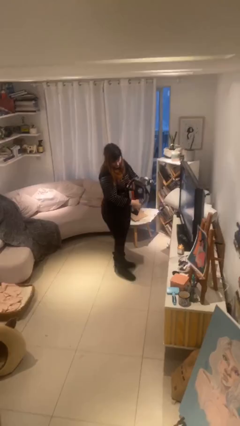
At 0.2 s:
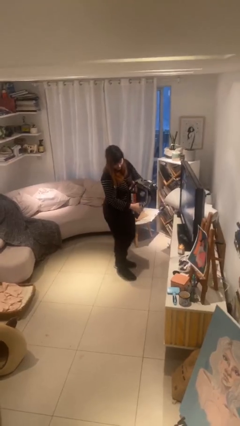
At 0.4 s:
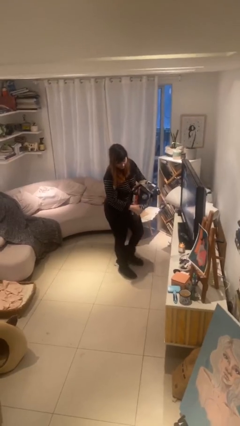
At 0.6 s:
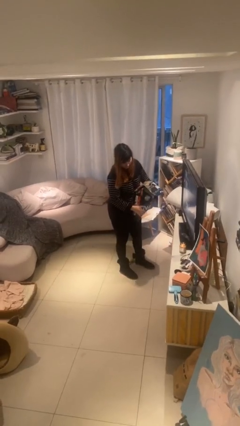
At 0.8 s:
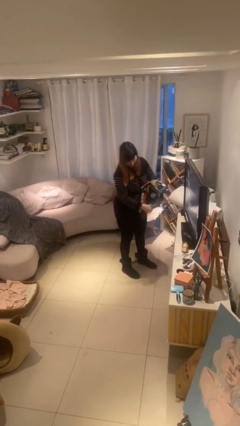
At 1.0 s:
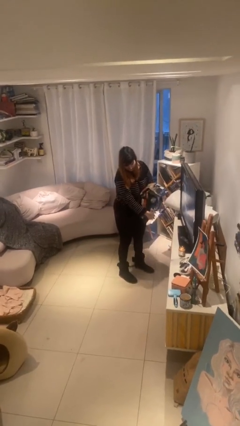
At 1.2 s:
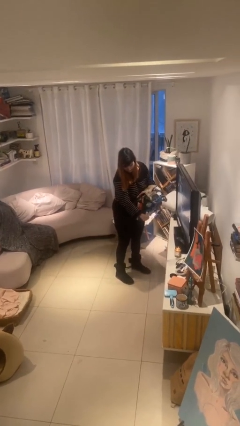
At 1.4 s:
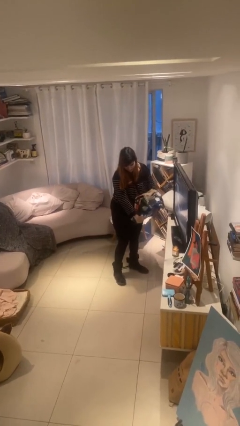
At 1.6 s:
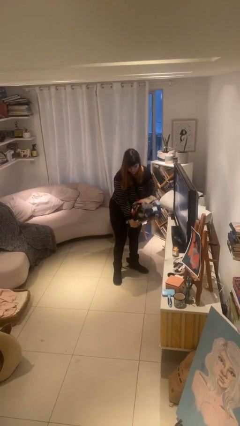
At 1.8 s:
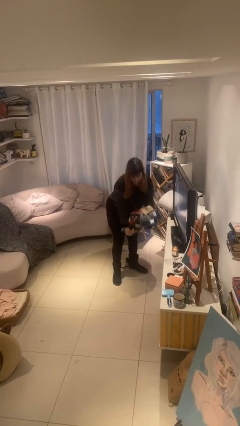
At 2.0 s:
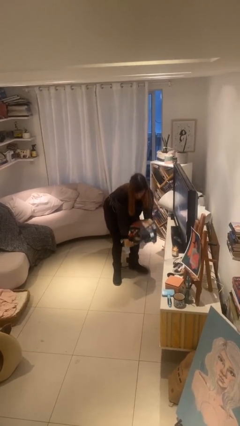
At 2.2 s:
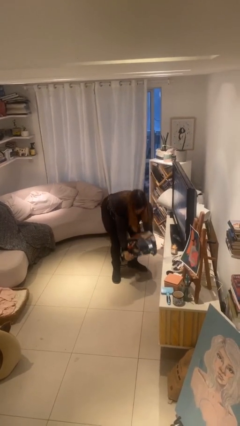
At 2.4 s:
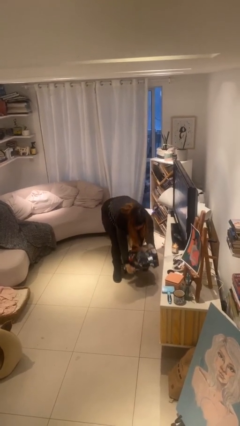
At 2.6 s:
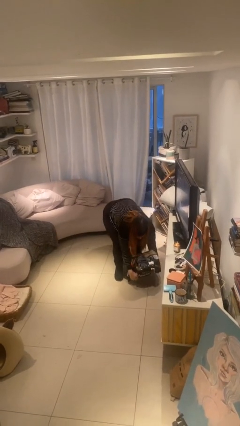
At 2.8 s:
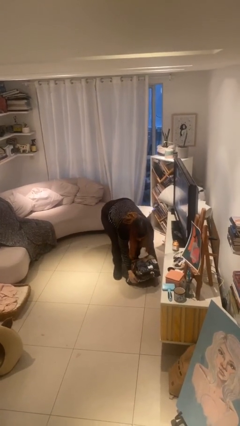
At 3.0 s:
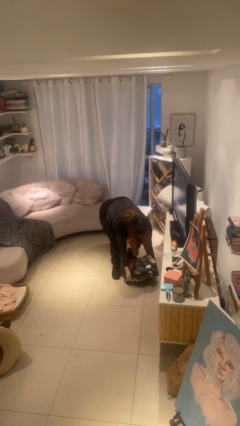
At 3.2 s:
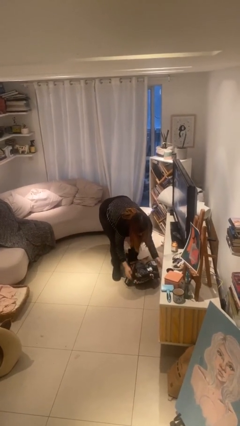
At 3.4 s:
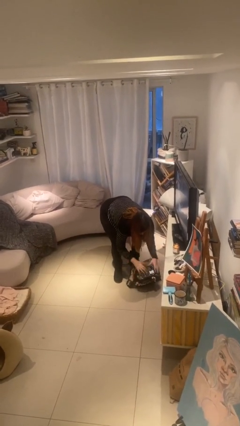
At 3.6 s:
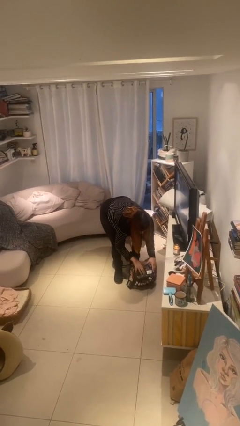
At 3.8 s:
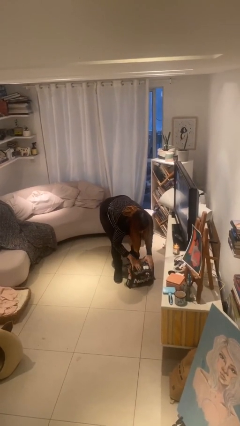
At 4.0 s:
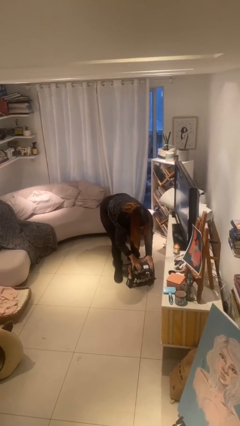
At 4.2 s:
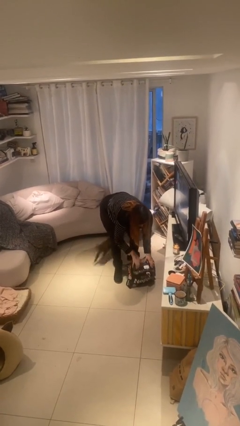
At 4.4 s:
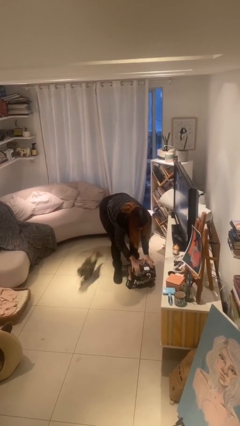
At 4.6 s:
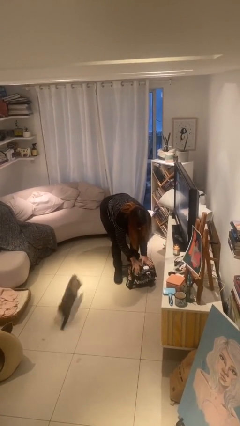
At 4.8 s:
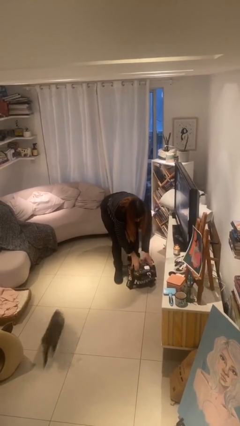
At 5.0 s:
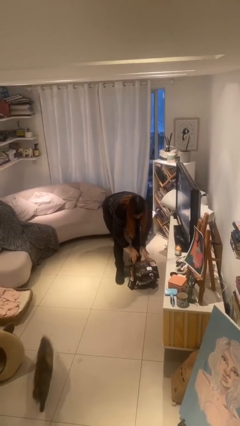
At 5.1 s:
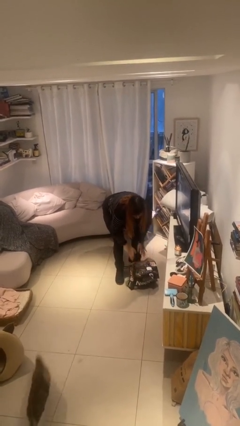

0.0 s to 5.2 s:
person puts down object on floor

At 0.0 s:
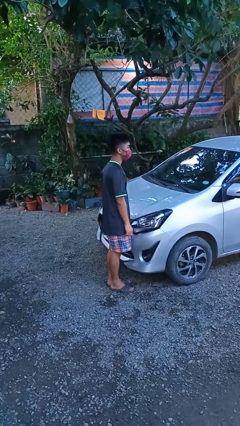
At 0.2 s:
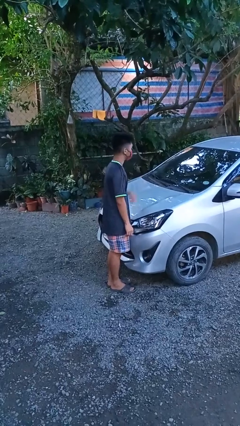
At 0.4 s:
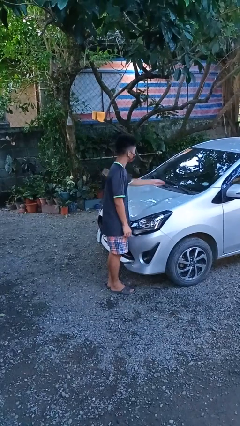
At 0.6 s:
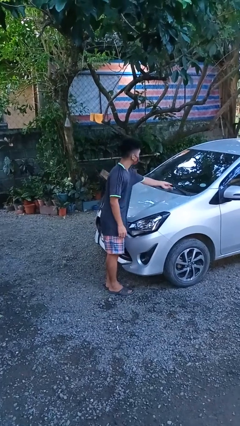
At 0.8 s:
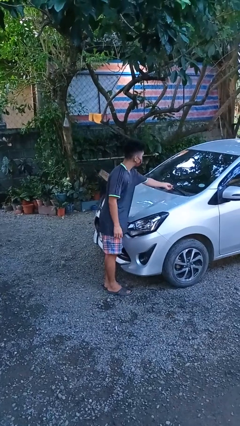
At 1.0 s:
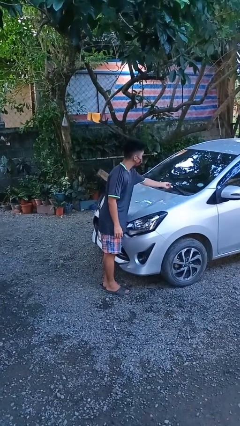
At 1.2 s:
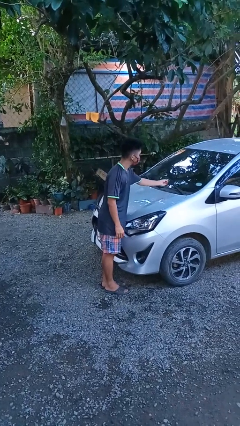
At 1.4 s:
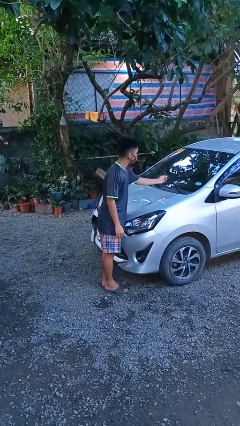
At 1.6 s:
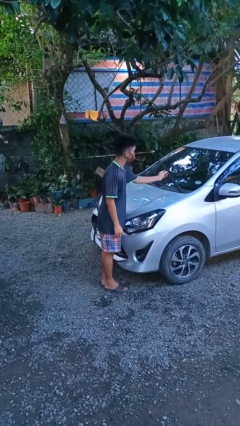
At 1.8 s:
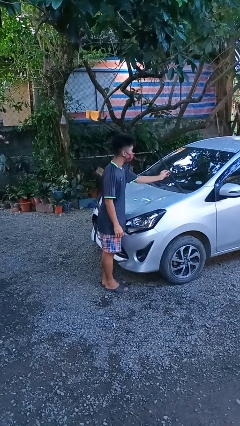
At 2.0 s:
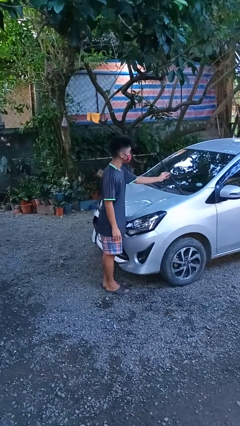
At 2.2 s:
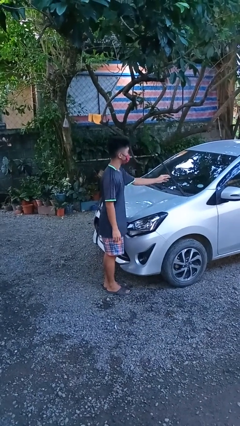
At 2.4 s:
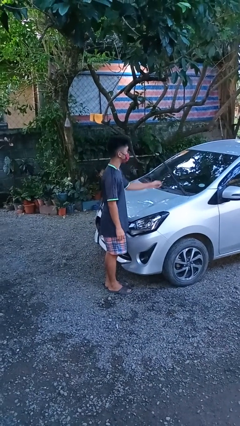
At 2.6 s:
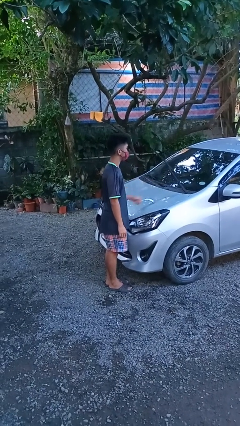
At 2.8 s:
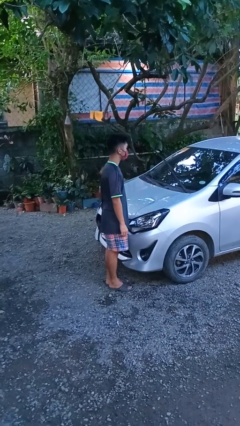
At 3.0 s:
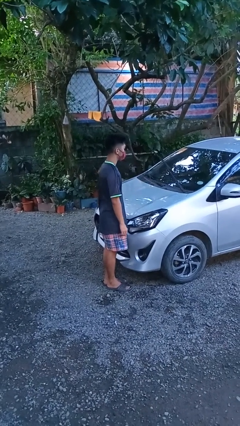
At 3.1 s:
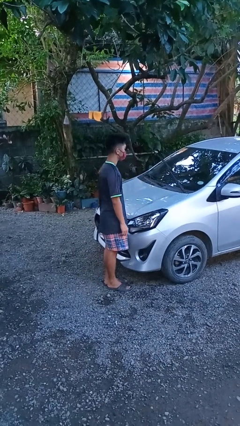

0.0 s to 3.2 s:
person flips up car wipers

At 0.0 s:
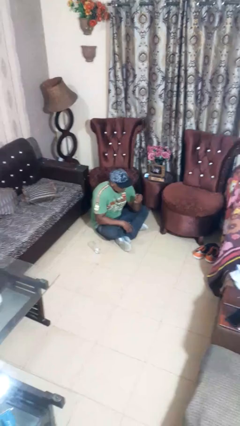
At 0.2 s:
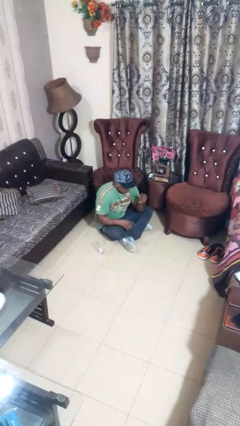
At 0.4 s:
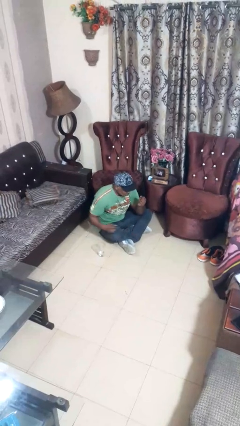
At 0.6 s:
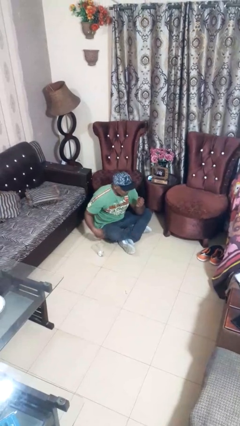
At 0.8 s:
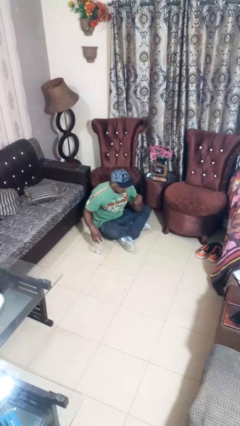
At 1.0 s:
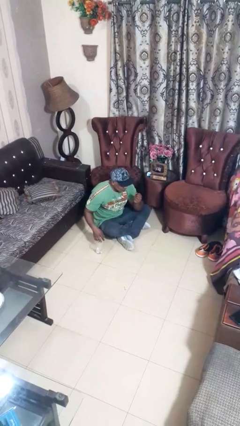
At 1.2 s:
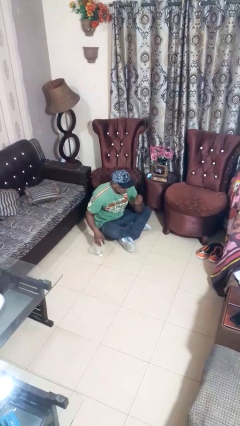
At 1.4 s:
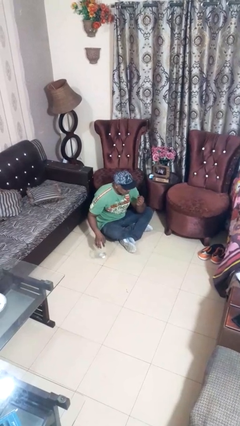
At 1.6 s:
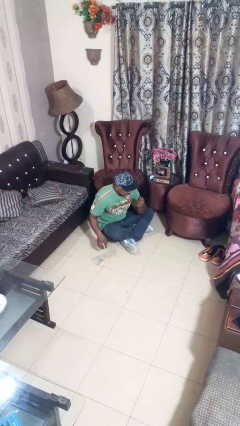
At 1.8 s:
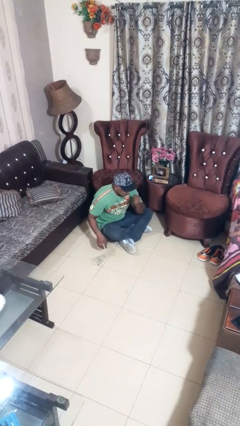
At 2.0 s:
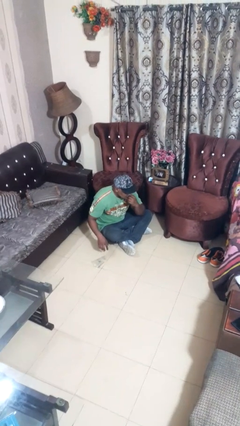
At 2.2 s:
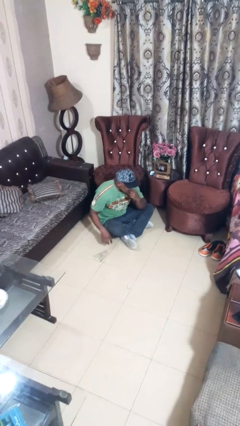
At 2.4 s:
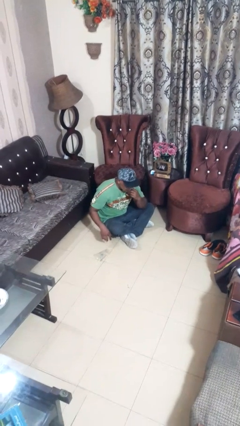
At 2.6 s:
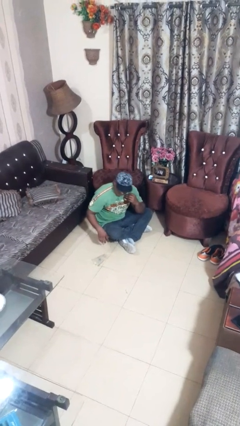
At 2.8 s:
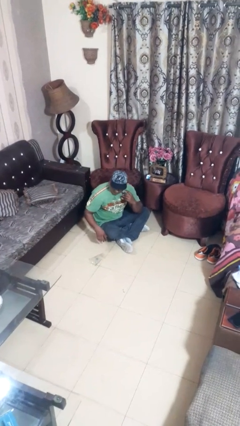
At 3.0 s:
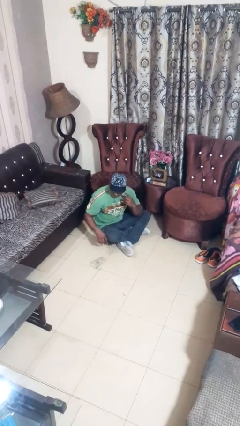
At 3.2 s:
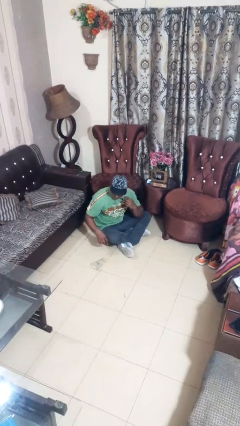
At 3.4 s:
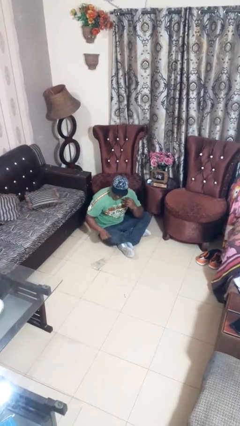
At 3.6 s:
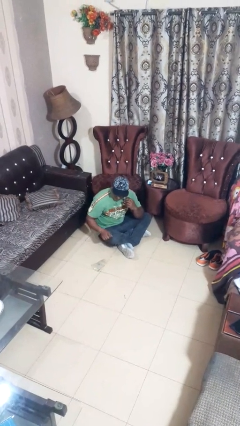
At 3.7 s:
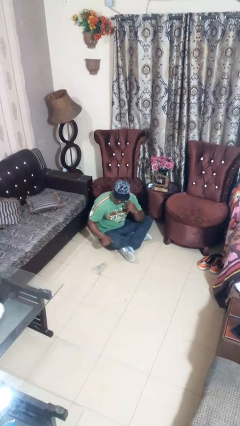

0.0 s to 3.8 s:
person spills on floor

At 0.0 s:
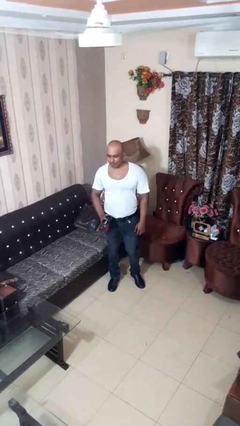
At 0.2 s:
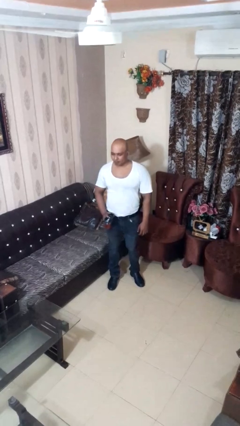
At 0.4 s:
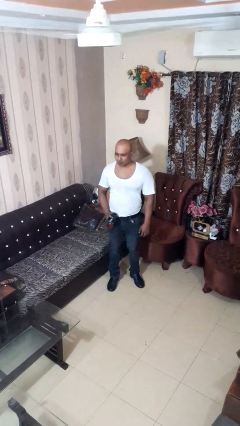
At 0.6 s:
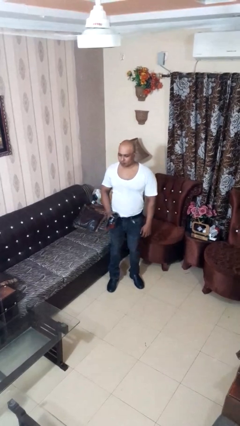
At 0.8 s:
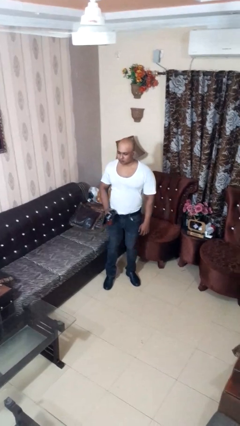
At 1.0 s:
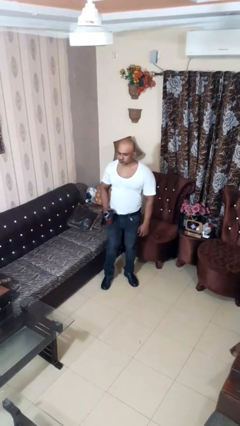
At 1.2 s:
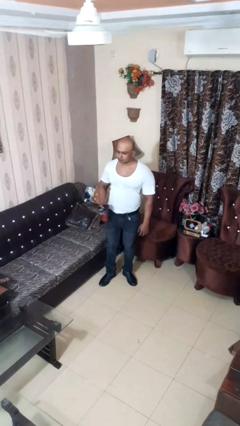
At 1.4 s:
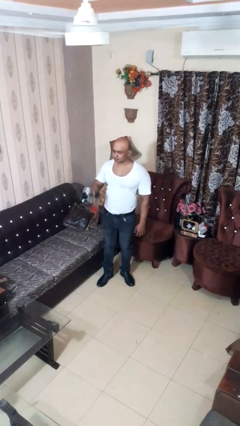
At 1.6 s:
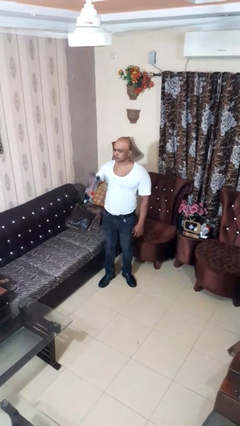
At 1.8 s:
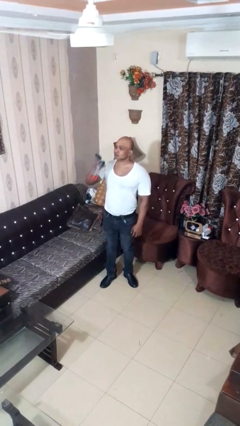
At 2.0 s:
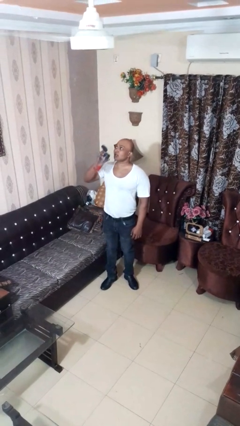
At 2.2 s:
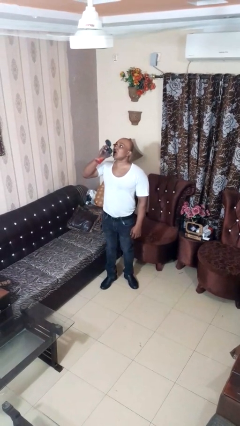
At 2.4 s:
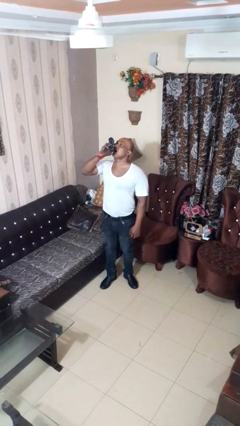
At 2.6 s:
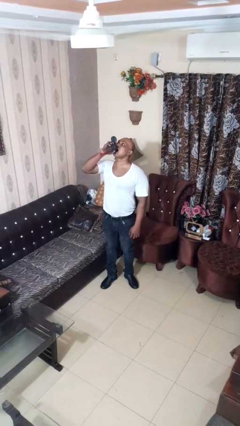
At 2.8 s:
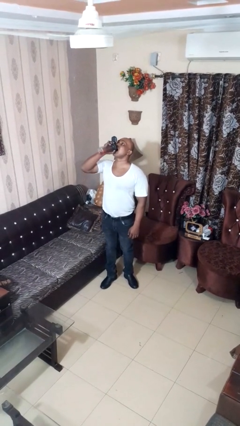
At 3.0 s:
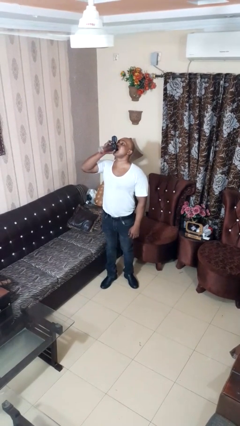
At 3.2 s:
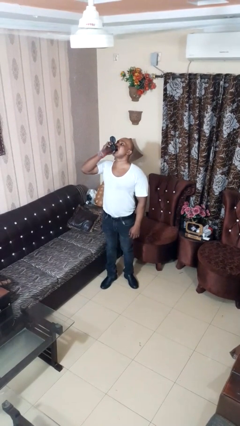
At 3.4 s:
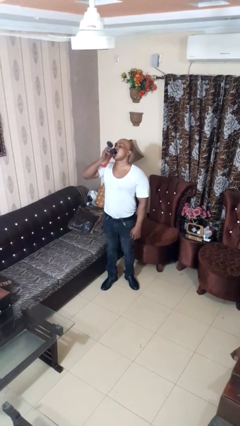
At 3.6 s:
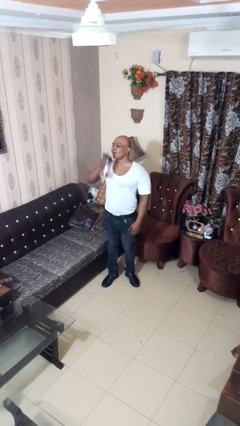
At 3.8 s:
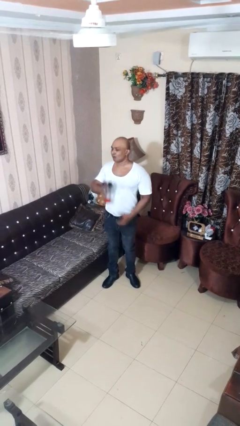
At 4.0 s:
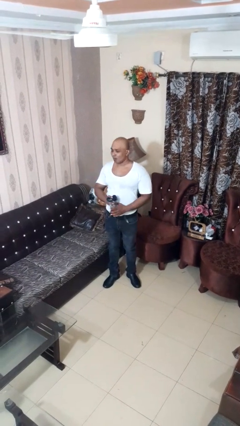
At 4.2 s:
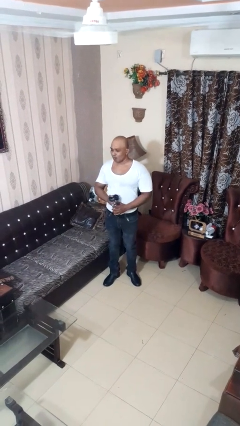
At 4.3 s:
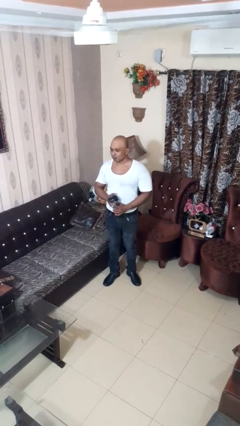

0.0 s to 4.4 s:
person drinks from bottle

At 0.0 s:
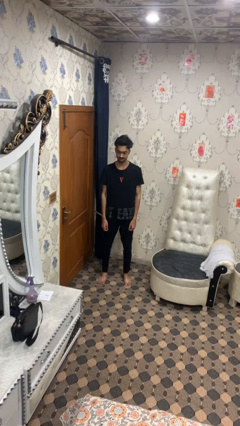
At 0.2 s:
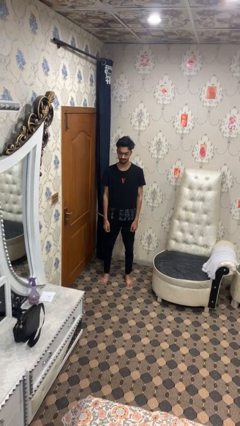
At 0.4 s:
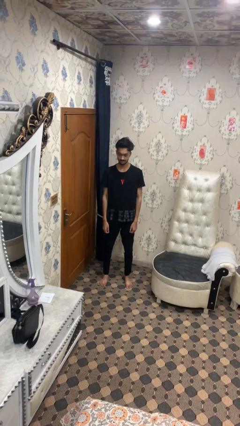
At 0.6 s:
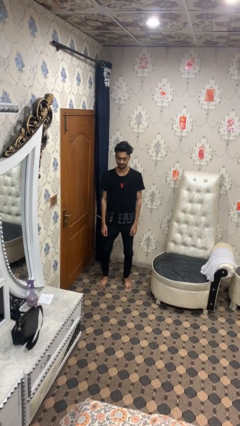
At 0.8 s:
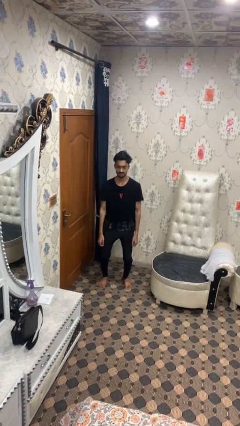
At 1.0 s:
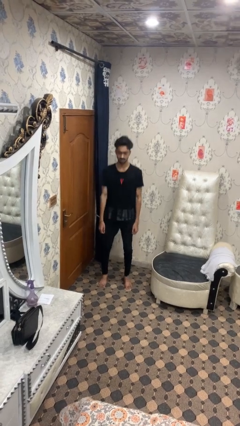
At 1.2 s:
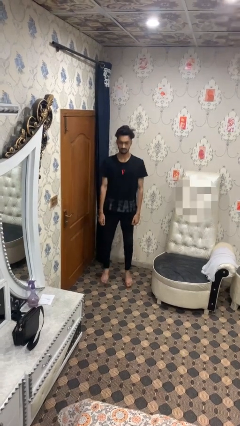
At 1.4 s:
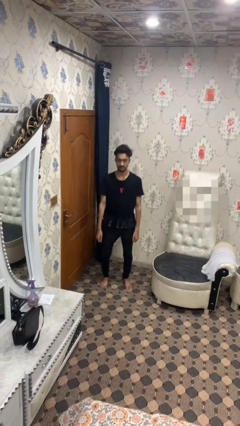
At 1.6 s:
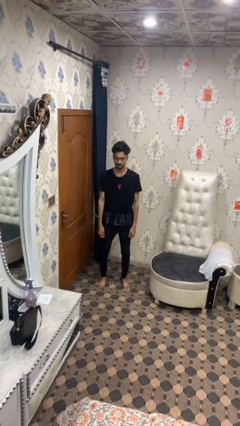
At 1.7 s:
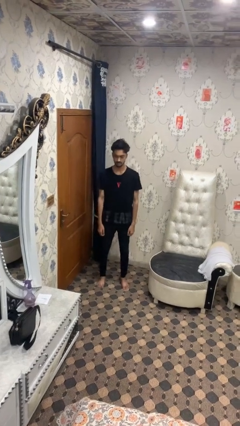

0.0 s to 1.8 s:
person jumps
